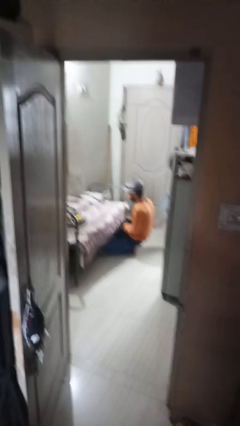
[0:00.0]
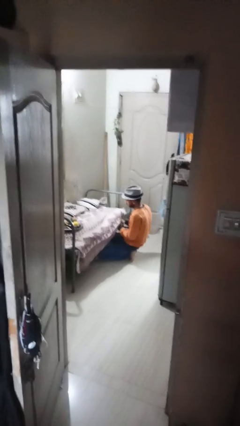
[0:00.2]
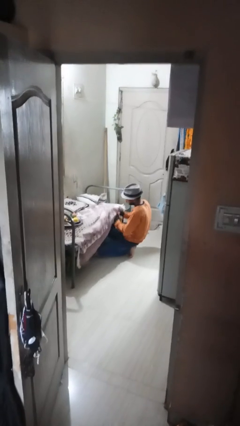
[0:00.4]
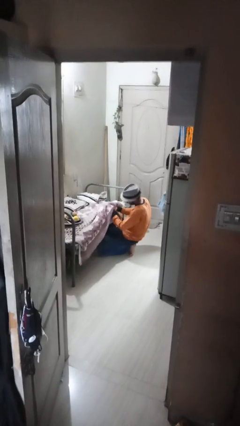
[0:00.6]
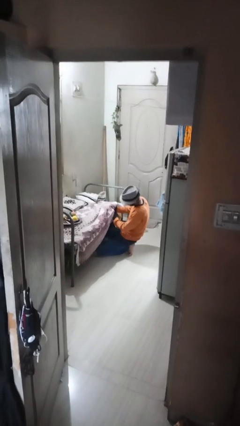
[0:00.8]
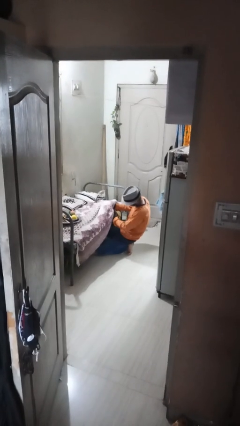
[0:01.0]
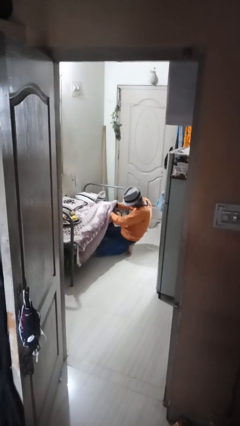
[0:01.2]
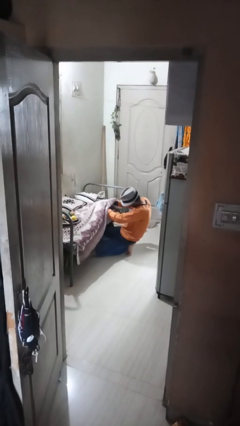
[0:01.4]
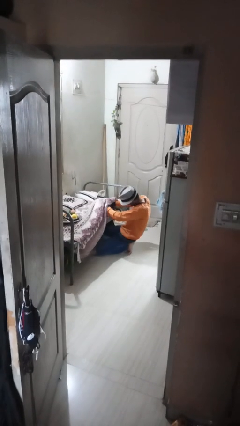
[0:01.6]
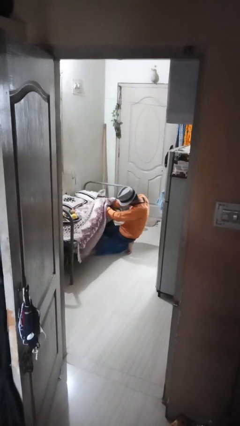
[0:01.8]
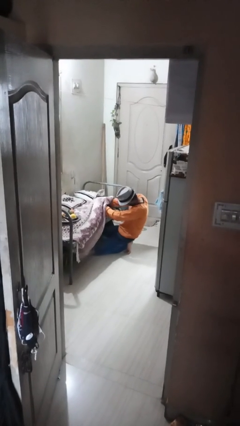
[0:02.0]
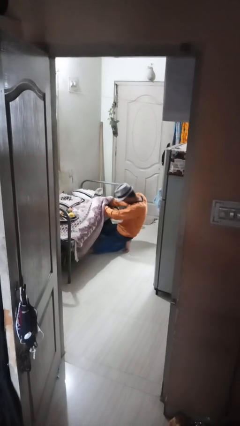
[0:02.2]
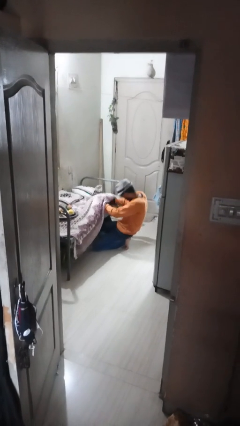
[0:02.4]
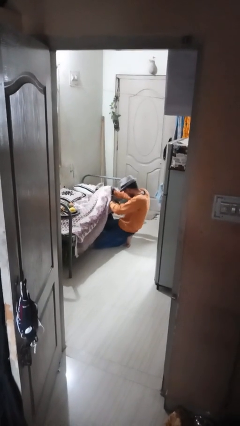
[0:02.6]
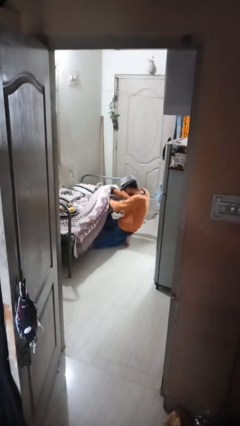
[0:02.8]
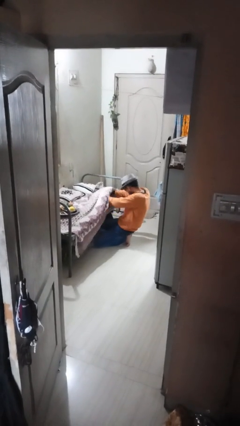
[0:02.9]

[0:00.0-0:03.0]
person searches under couch

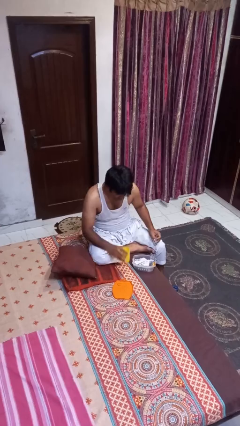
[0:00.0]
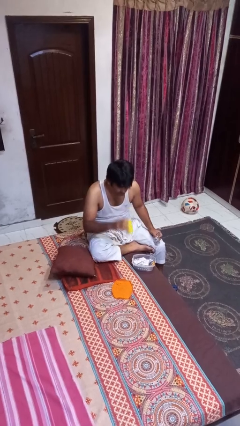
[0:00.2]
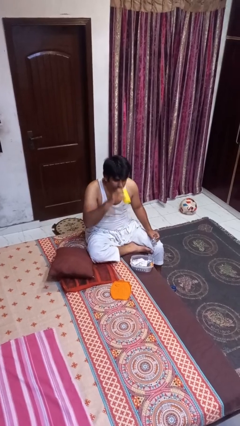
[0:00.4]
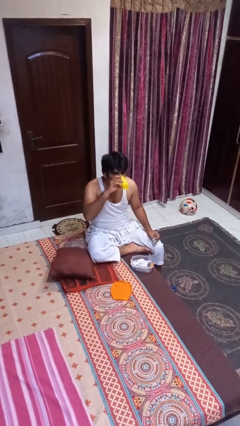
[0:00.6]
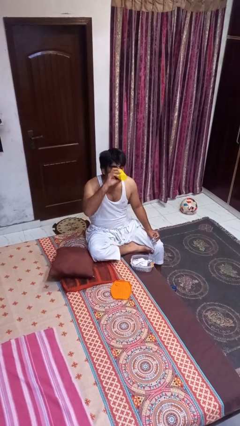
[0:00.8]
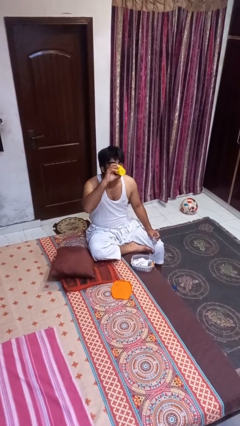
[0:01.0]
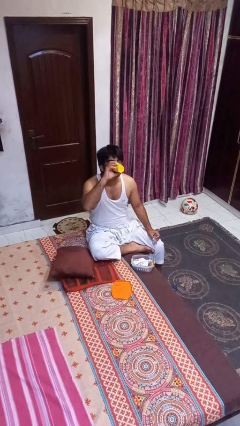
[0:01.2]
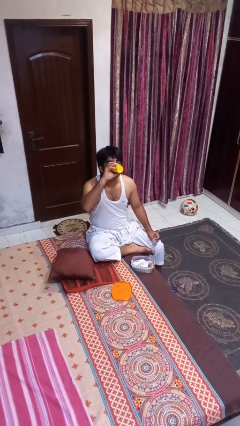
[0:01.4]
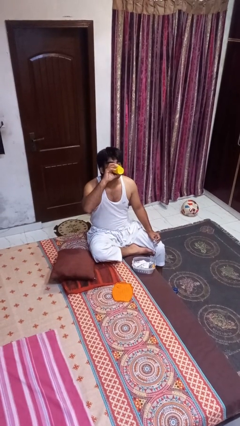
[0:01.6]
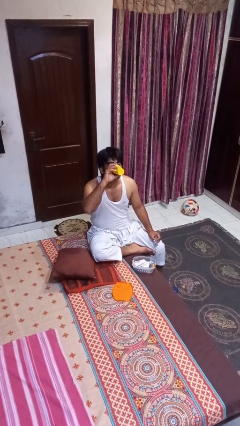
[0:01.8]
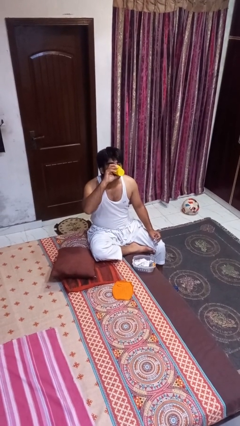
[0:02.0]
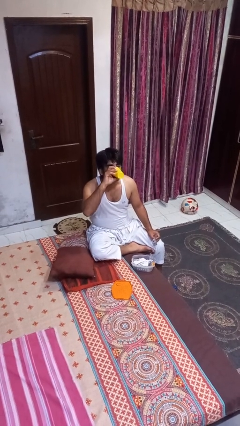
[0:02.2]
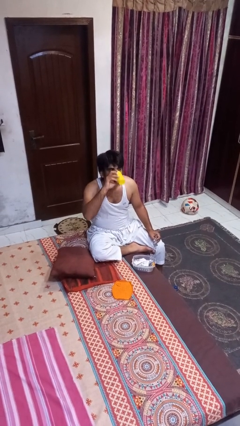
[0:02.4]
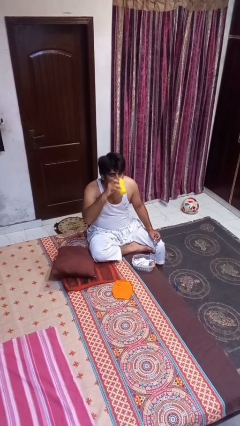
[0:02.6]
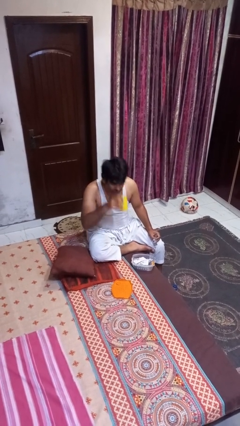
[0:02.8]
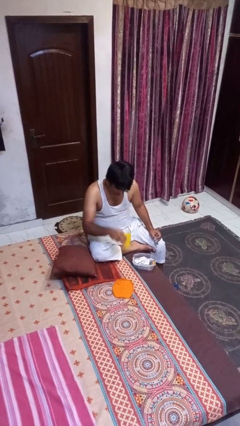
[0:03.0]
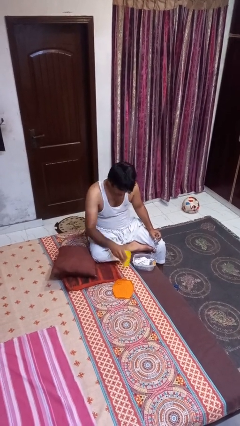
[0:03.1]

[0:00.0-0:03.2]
person drinks from cup

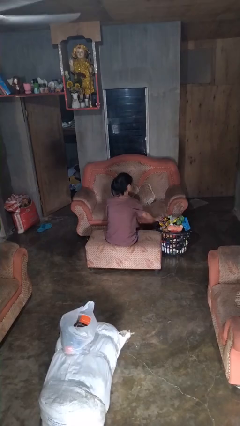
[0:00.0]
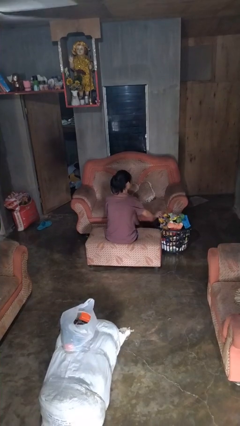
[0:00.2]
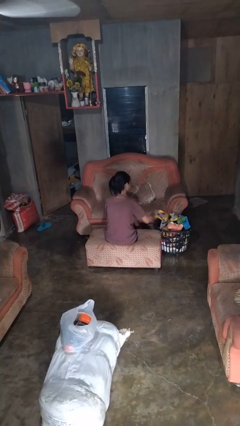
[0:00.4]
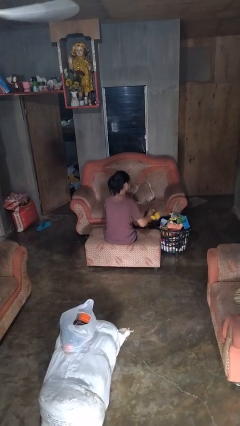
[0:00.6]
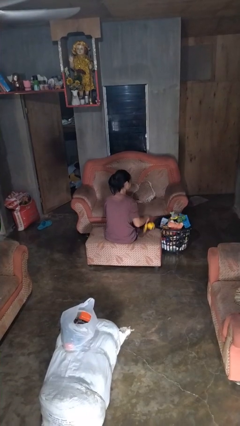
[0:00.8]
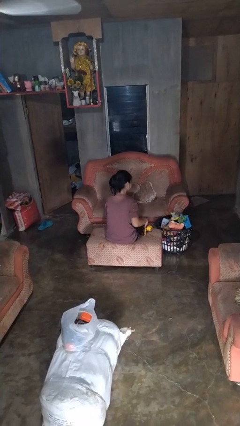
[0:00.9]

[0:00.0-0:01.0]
person takes object from basket

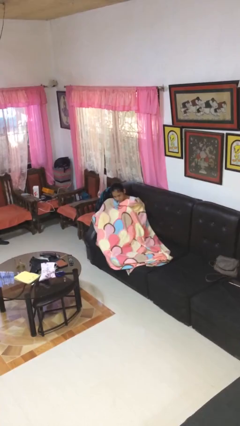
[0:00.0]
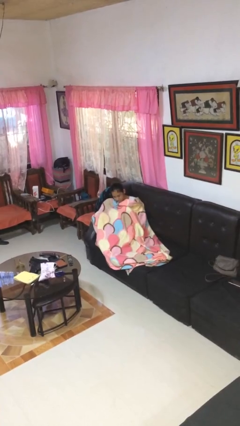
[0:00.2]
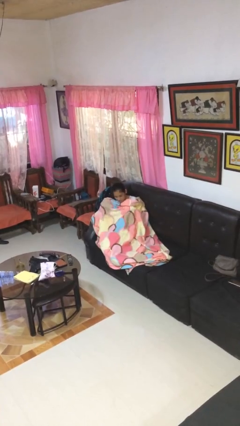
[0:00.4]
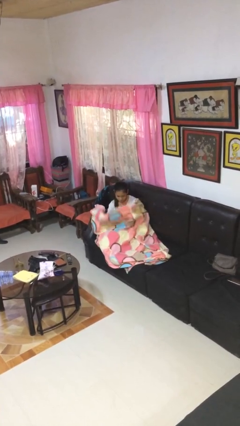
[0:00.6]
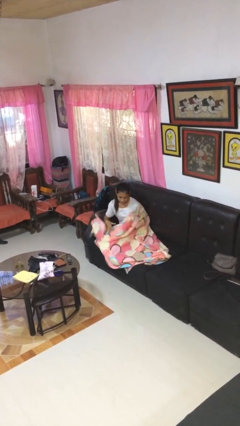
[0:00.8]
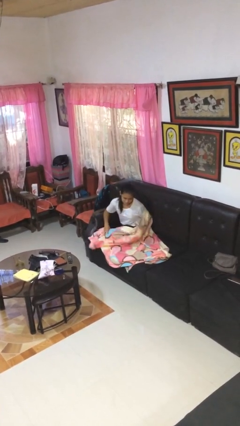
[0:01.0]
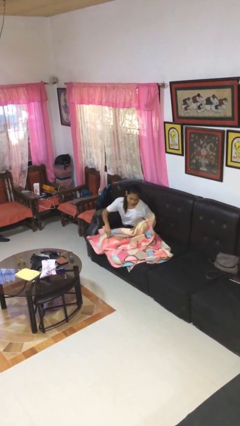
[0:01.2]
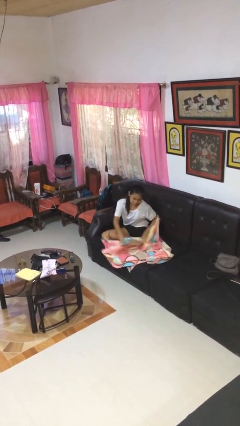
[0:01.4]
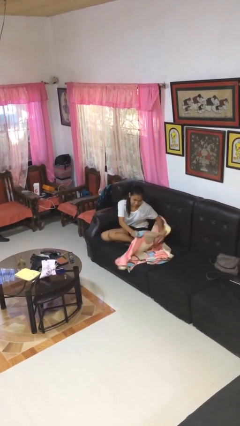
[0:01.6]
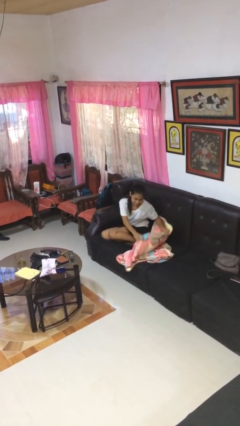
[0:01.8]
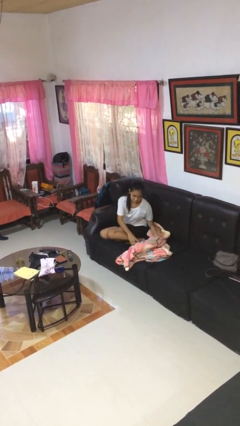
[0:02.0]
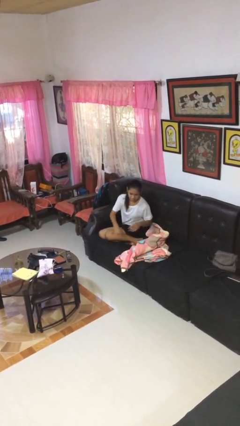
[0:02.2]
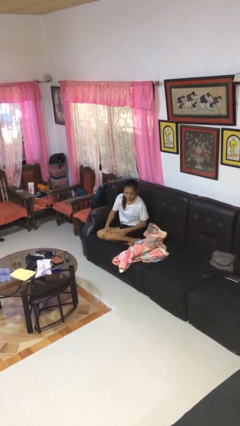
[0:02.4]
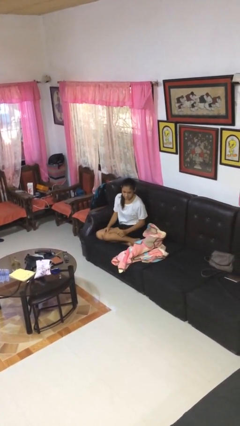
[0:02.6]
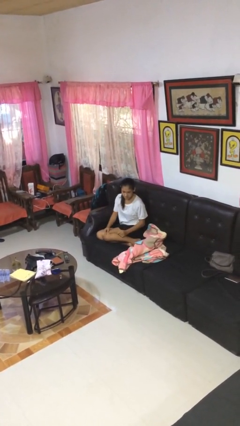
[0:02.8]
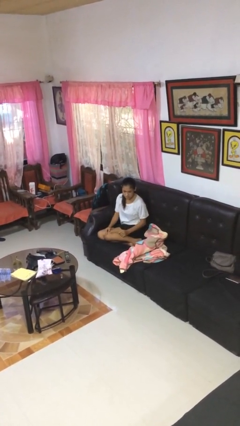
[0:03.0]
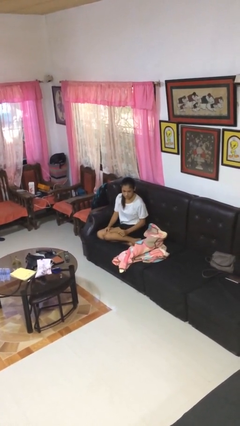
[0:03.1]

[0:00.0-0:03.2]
person uncovers with blanket

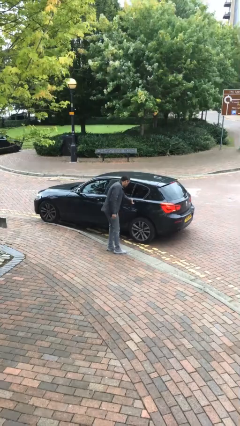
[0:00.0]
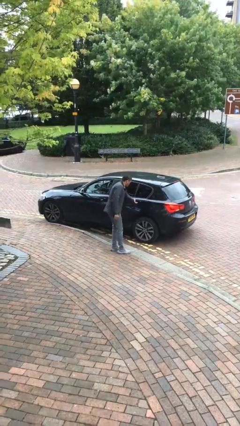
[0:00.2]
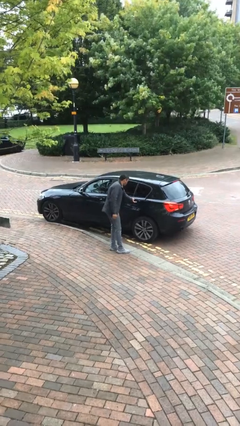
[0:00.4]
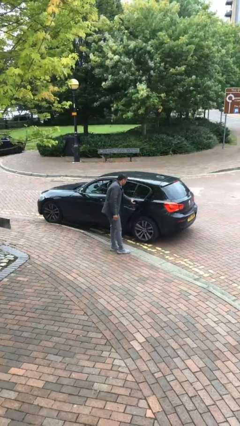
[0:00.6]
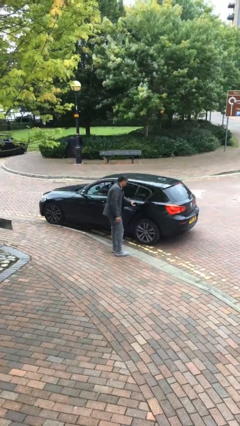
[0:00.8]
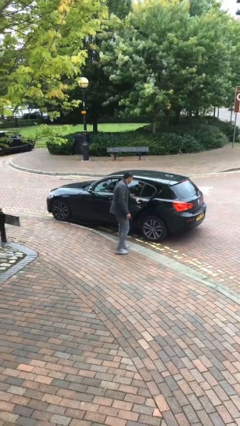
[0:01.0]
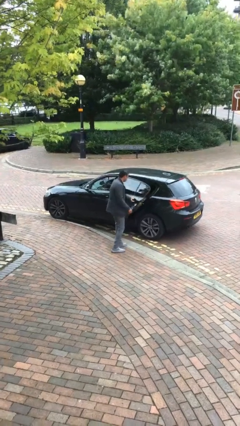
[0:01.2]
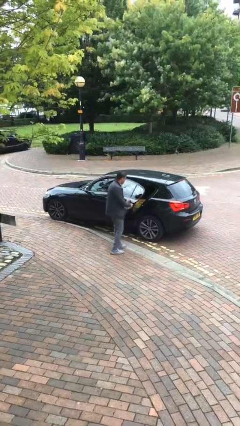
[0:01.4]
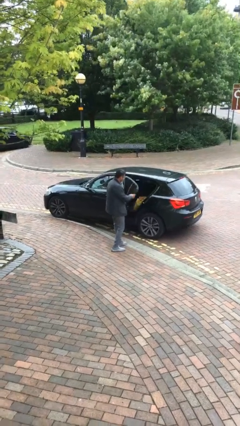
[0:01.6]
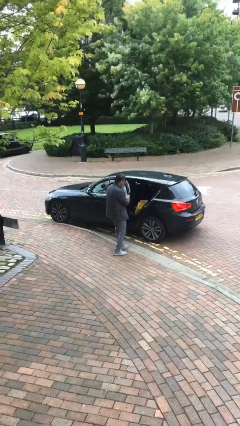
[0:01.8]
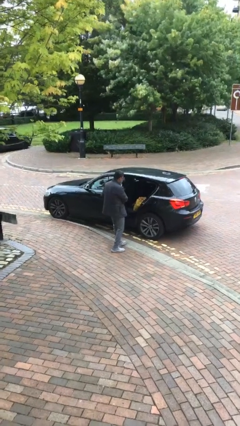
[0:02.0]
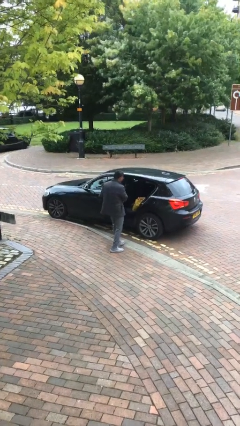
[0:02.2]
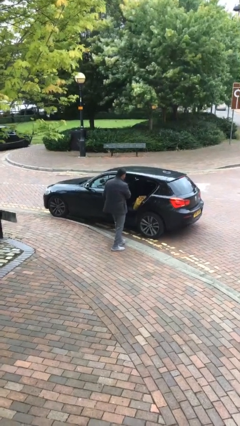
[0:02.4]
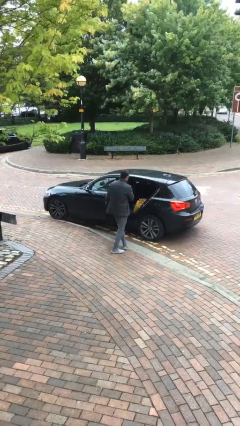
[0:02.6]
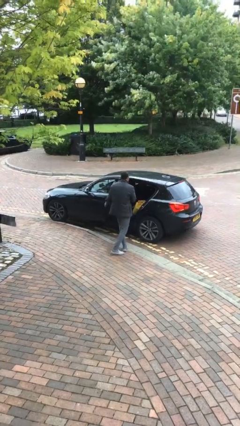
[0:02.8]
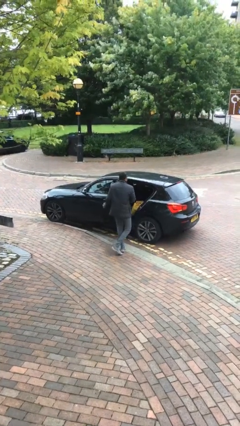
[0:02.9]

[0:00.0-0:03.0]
person opens car door

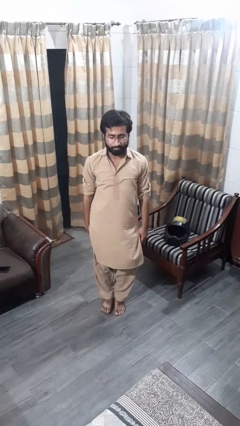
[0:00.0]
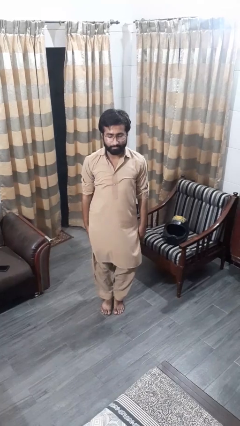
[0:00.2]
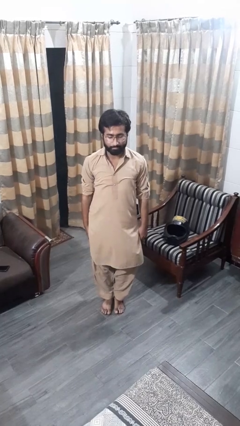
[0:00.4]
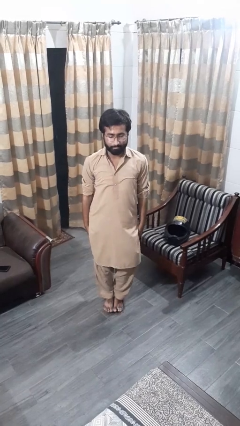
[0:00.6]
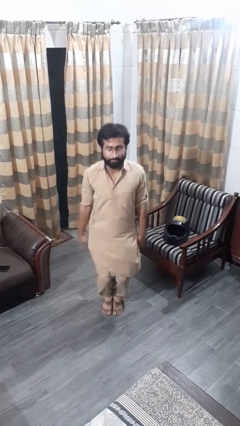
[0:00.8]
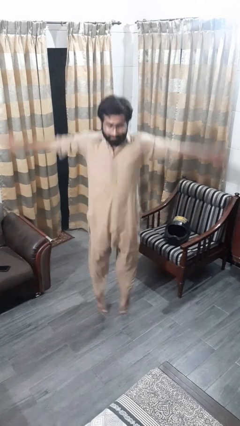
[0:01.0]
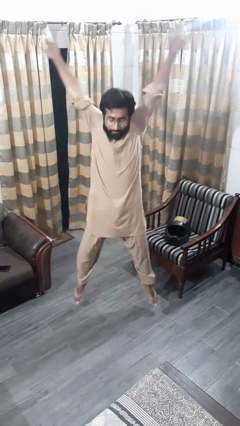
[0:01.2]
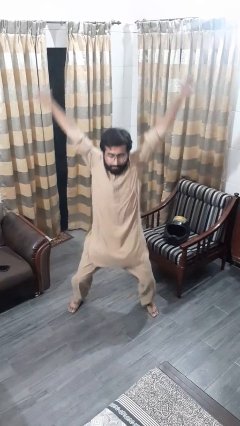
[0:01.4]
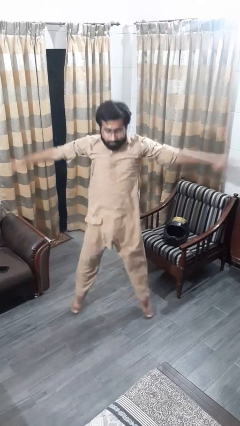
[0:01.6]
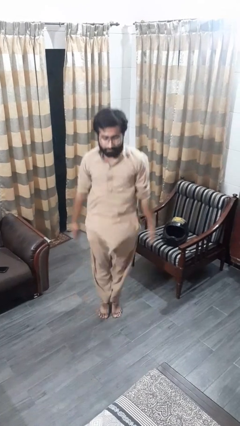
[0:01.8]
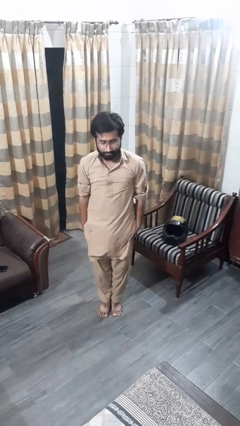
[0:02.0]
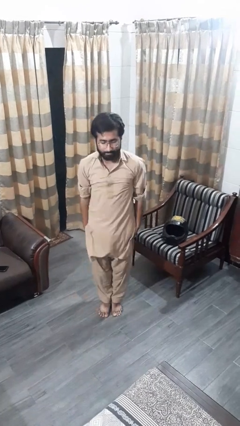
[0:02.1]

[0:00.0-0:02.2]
person exercises with jumping jacks

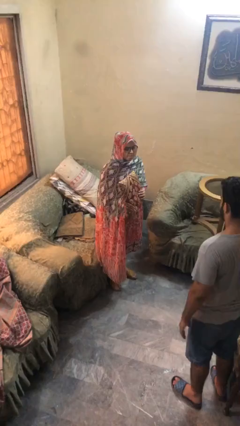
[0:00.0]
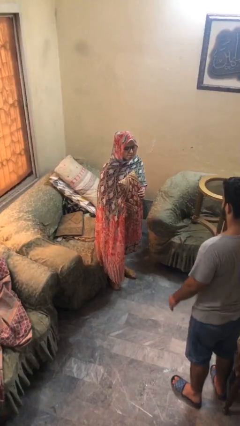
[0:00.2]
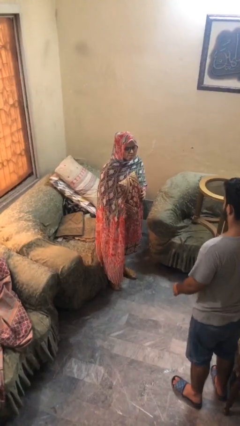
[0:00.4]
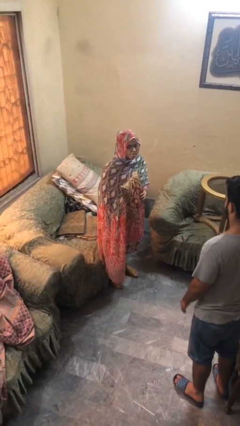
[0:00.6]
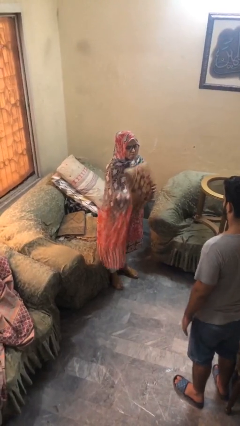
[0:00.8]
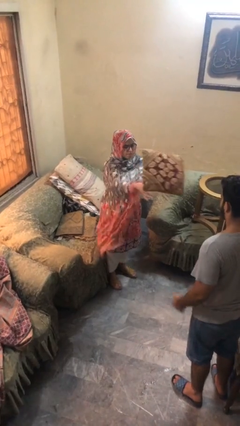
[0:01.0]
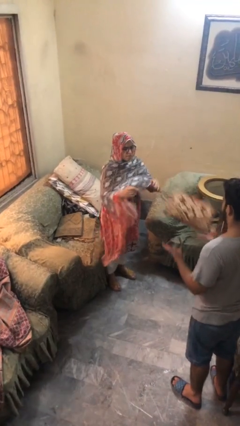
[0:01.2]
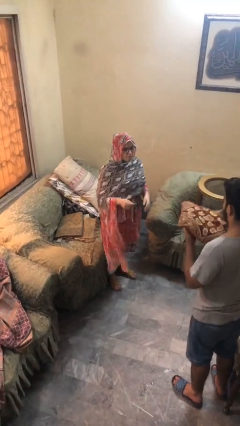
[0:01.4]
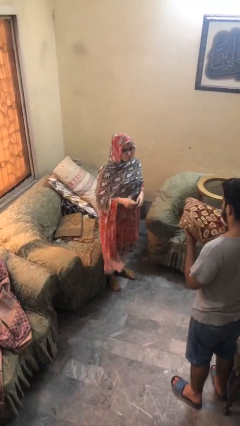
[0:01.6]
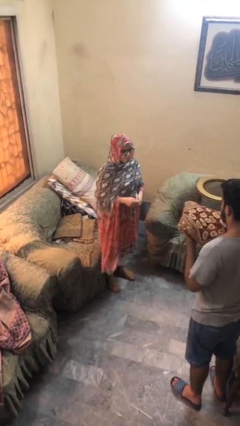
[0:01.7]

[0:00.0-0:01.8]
person throws object to person
